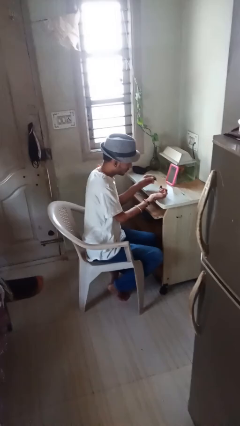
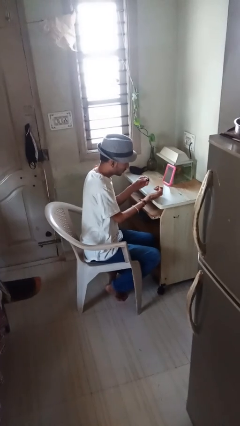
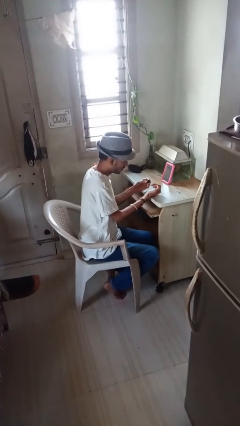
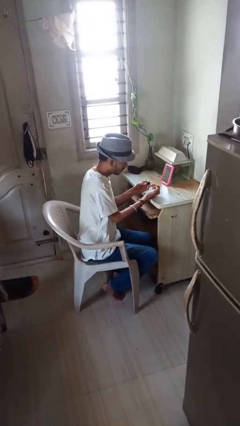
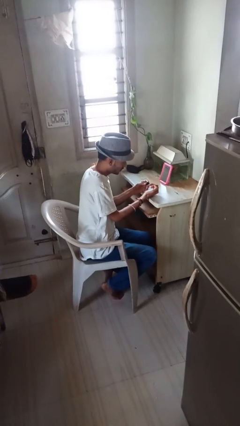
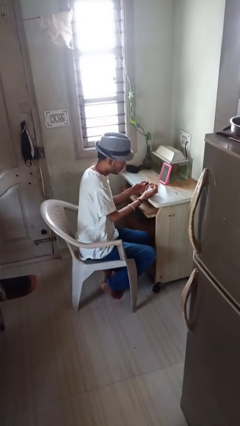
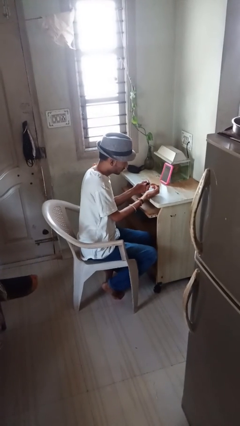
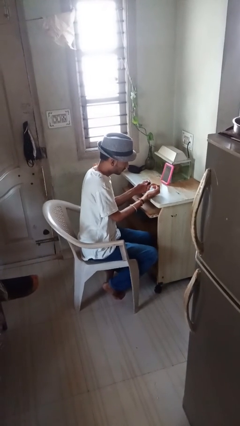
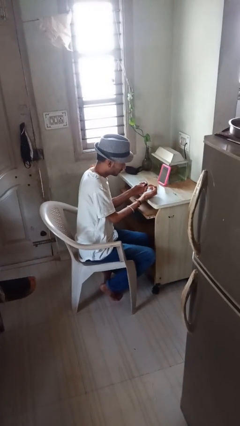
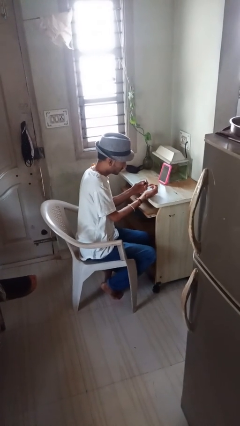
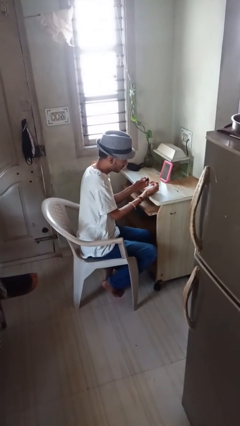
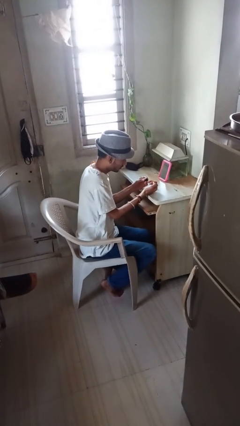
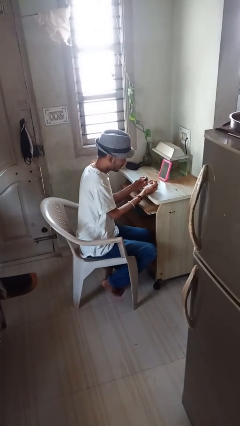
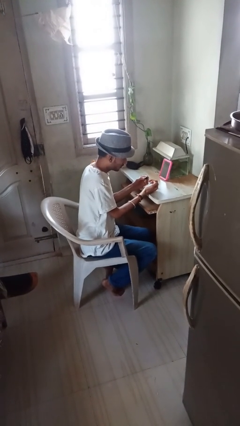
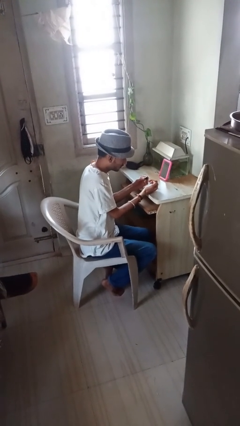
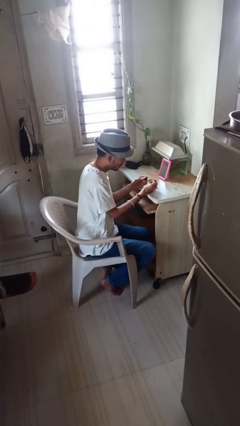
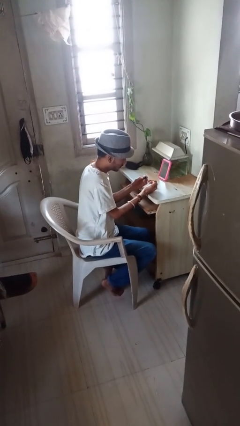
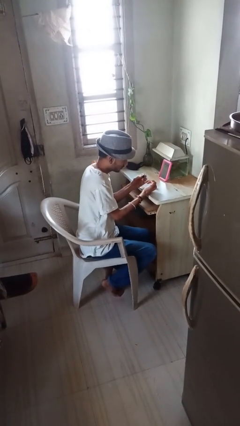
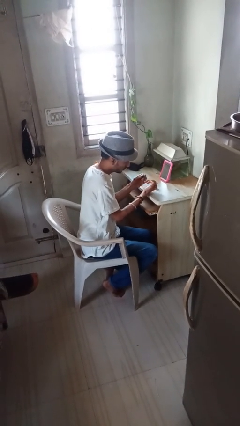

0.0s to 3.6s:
person paints fingernails

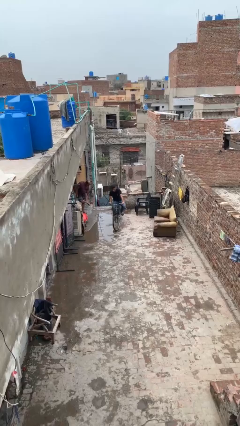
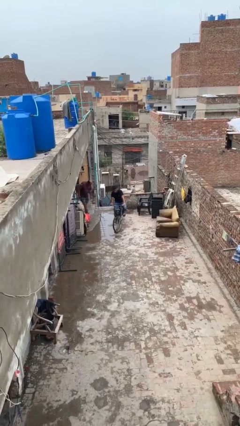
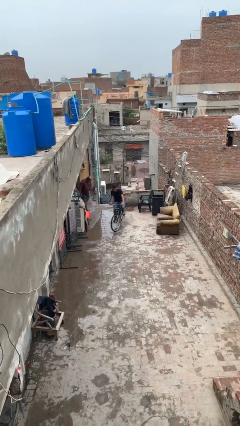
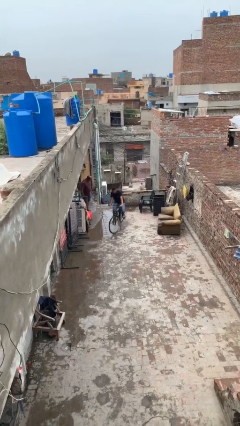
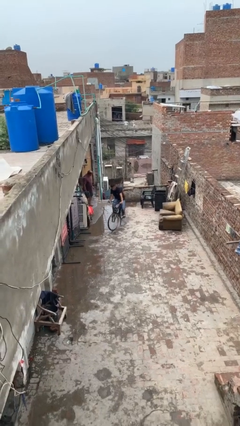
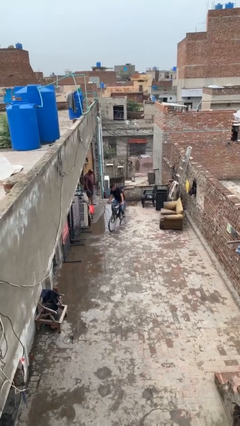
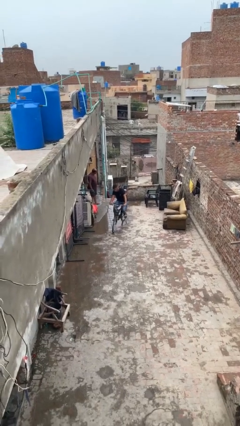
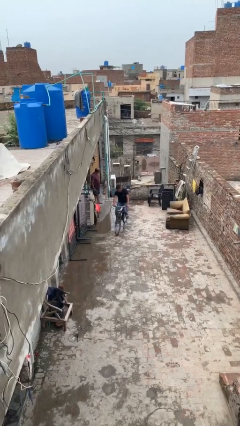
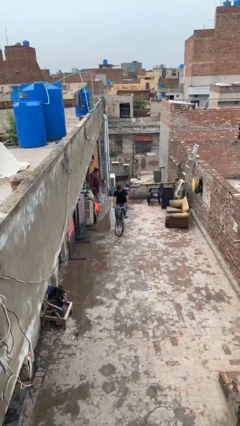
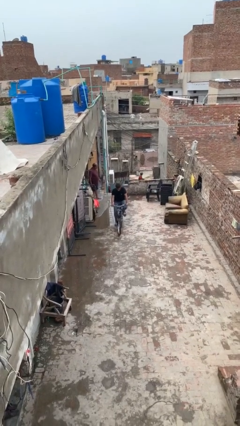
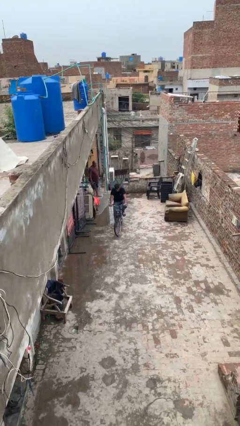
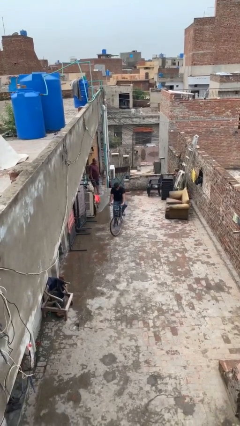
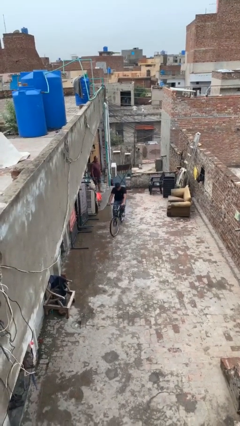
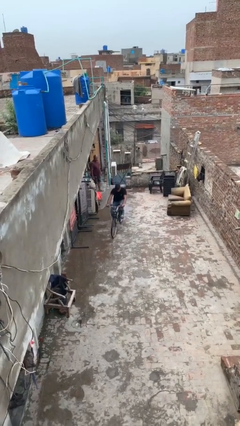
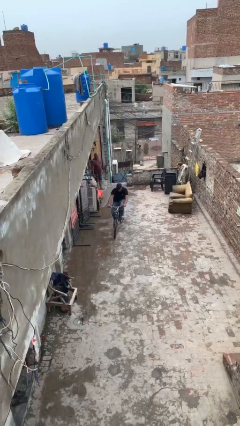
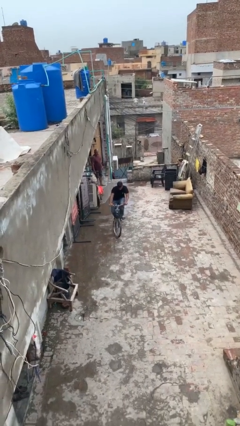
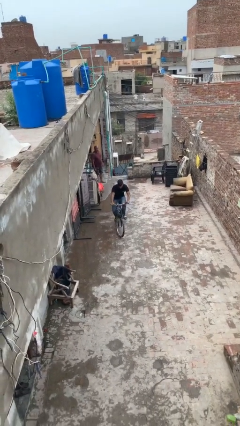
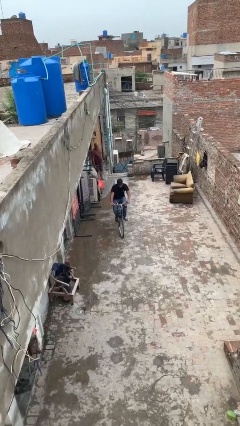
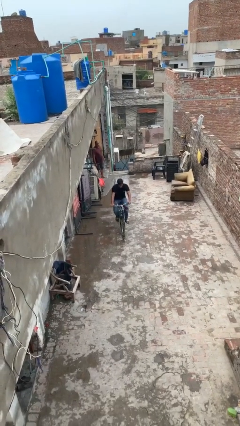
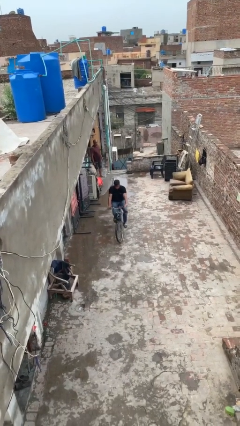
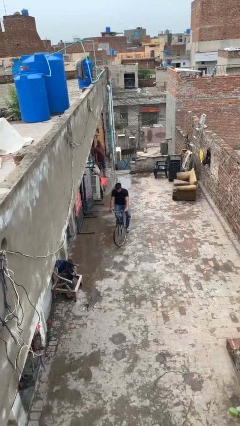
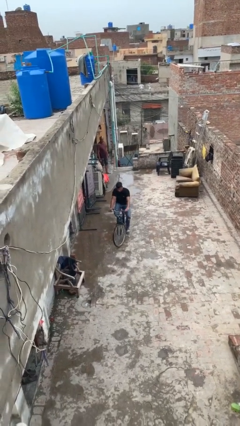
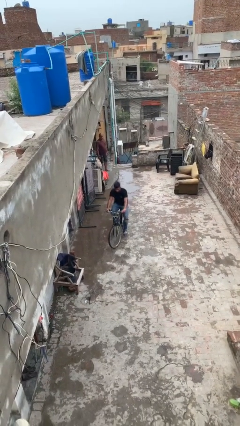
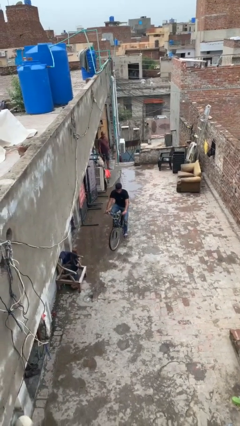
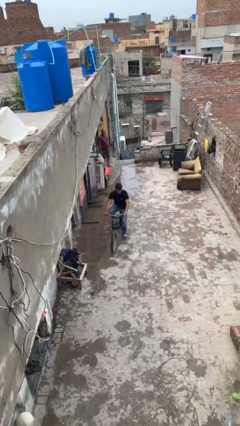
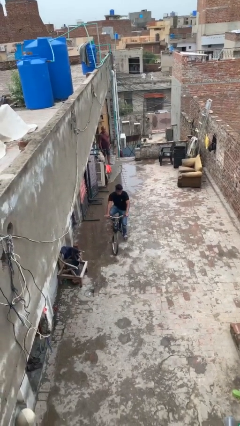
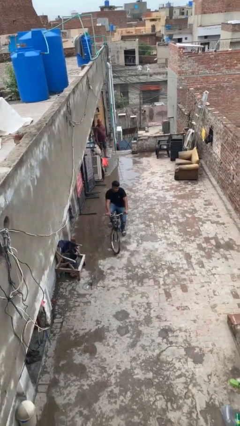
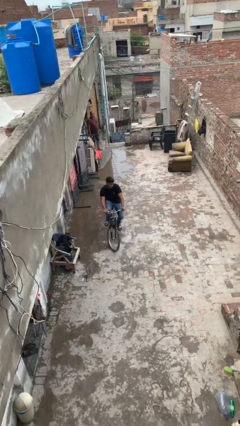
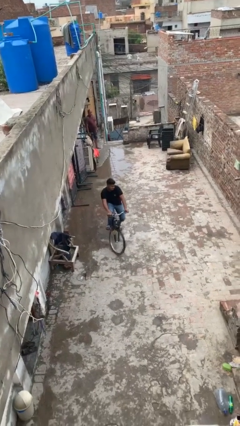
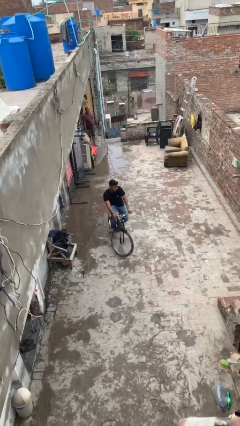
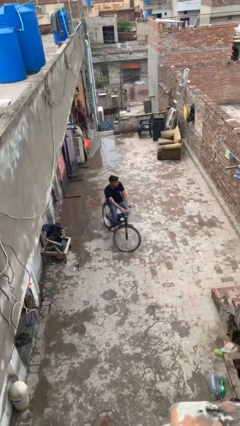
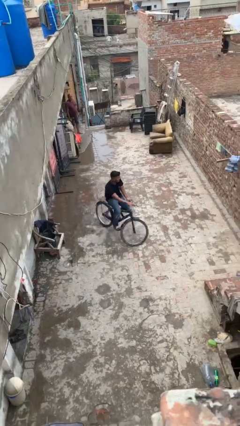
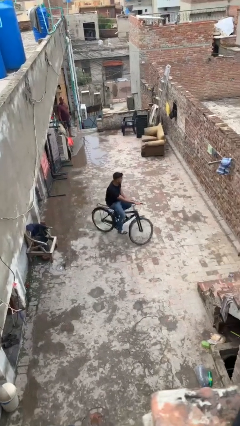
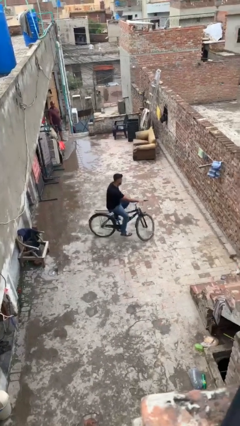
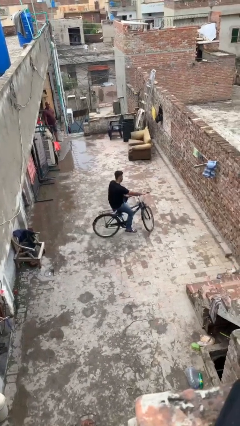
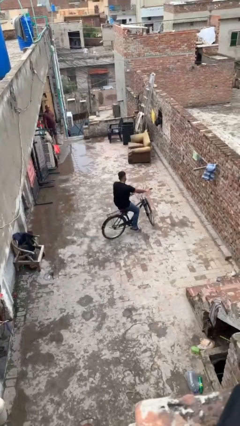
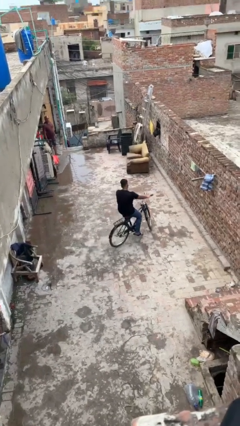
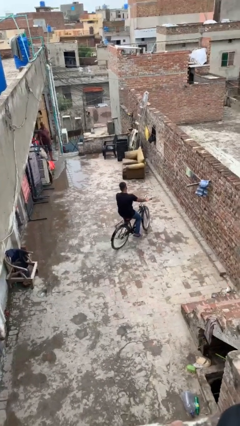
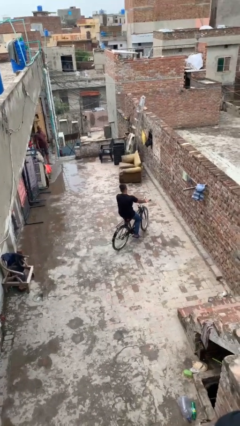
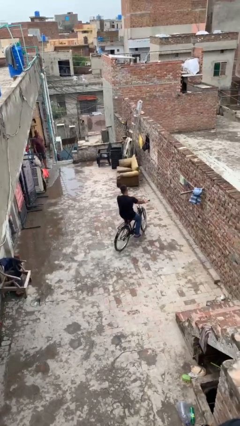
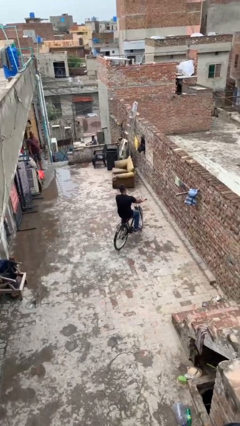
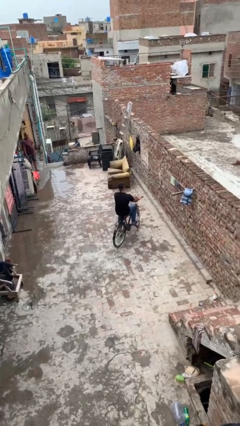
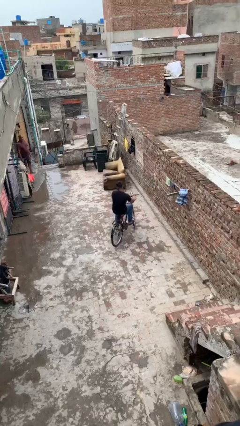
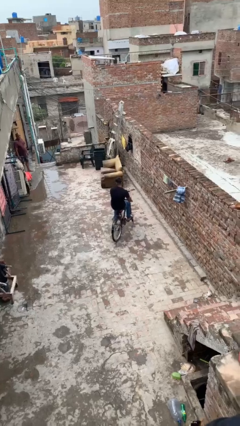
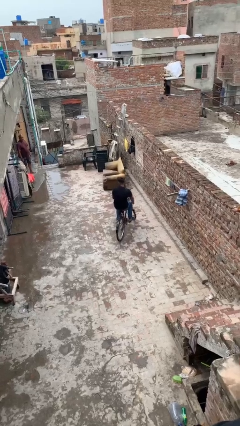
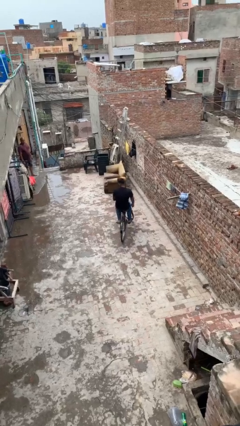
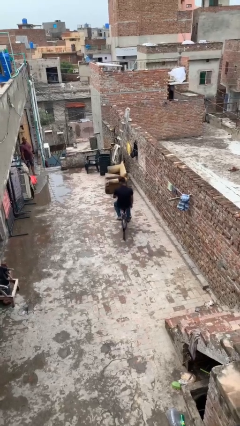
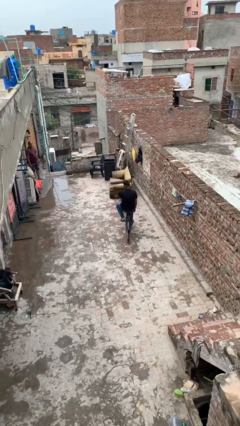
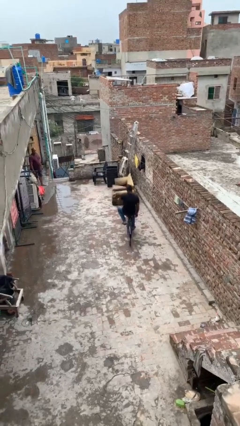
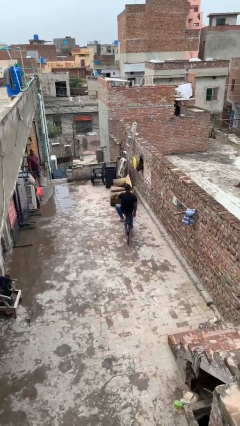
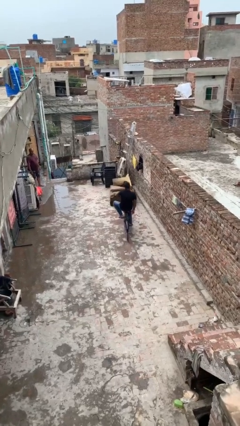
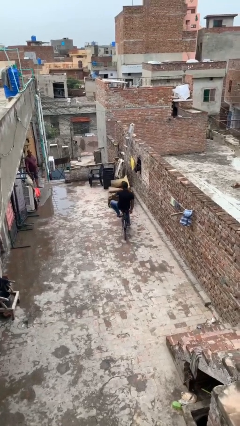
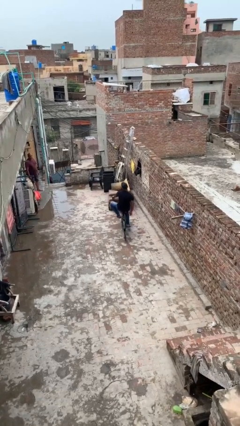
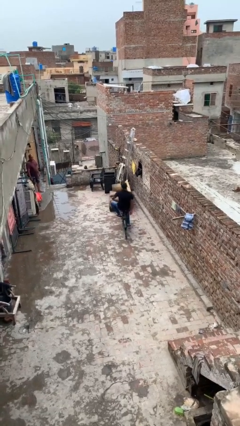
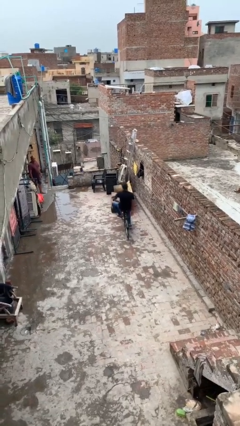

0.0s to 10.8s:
person rides bicycle

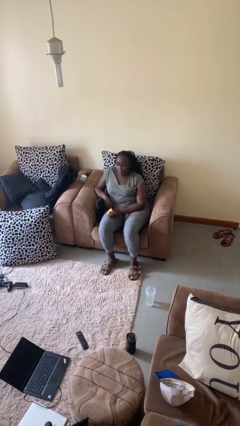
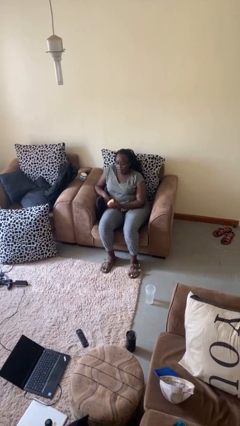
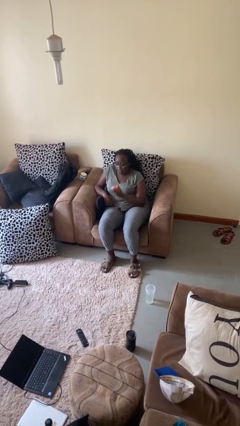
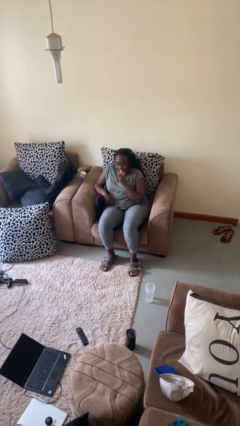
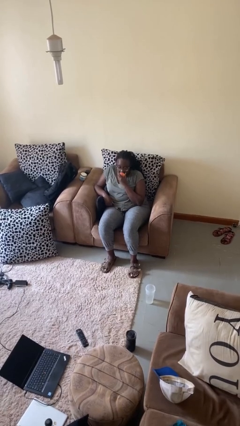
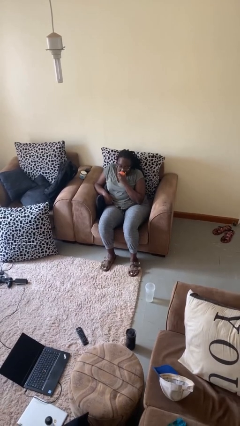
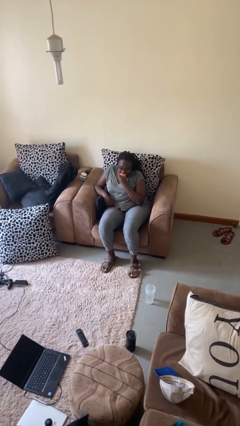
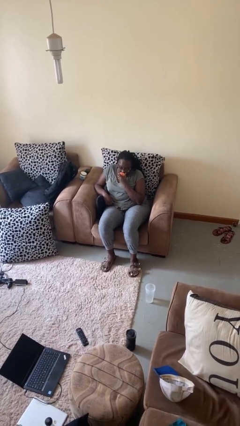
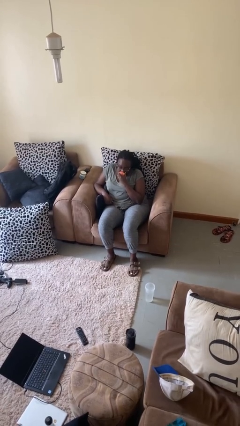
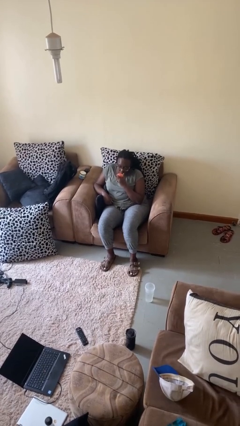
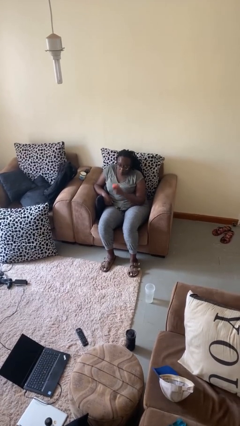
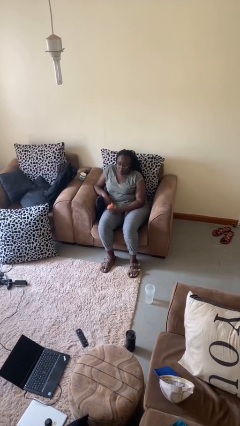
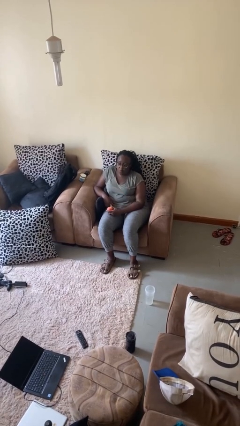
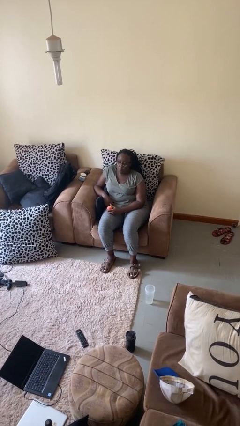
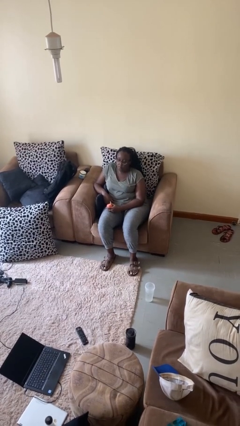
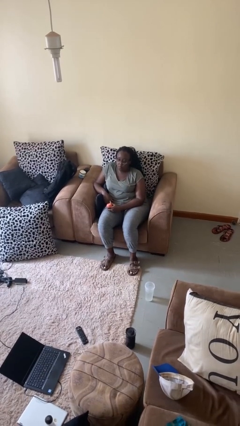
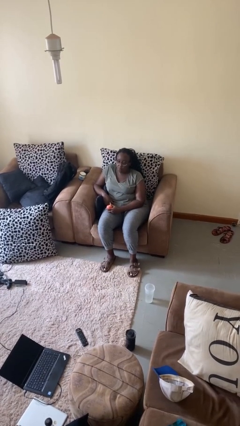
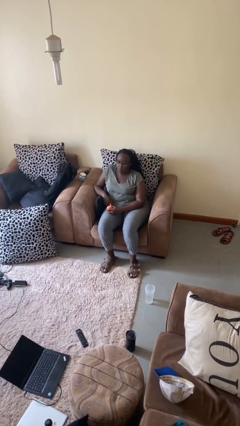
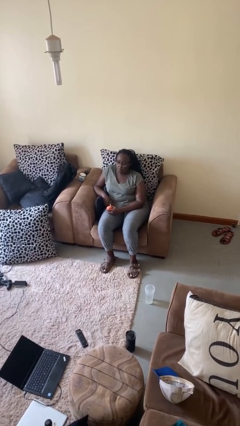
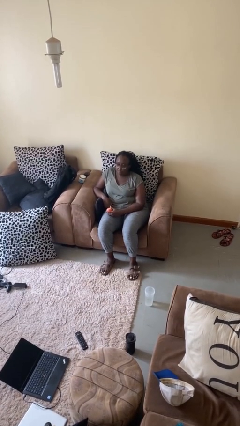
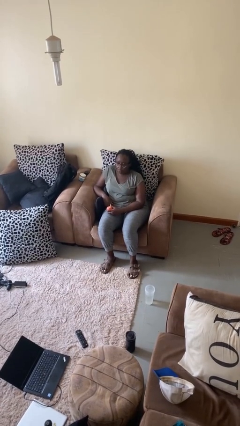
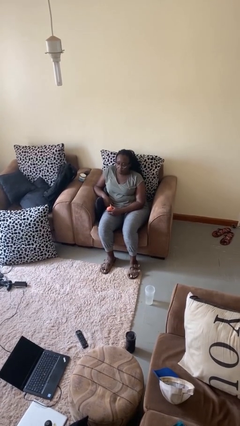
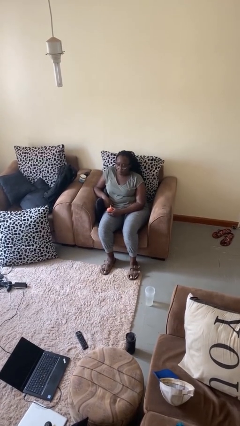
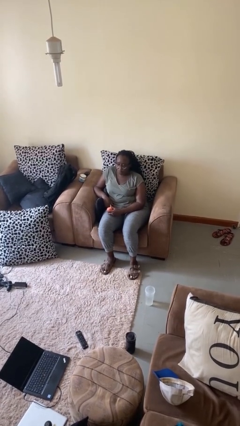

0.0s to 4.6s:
person eats apple
